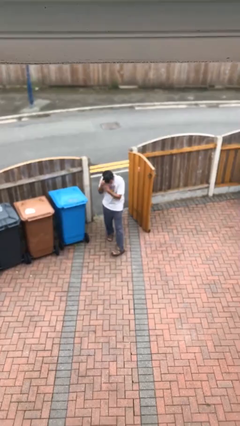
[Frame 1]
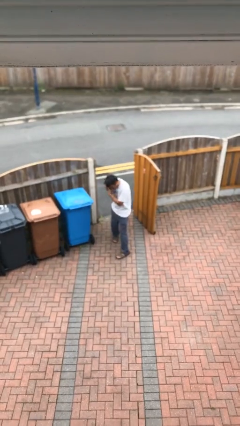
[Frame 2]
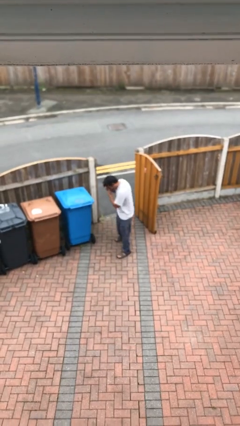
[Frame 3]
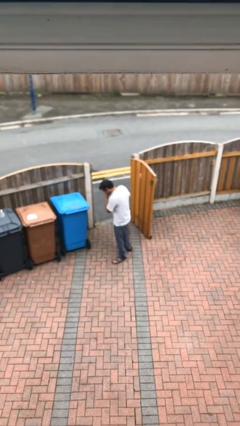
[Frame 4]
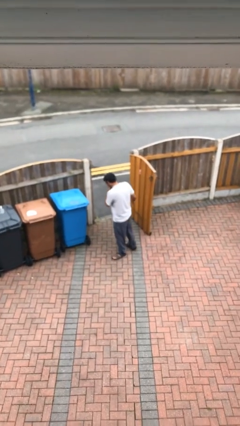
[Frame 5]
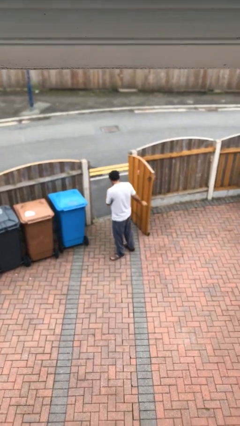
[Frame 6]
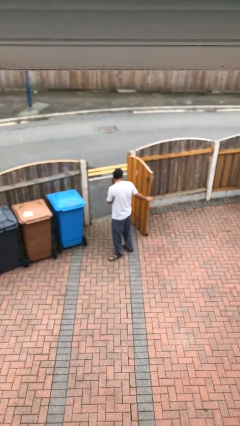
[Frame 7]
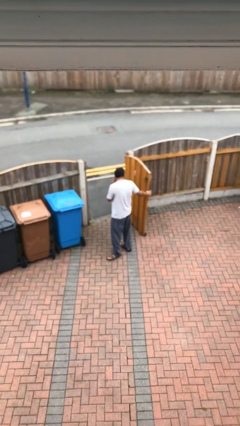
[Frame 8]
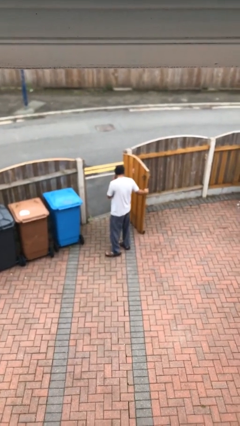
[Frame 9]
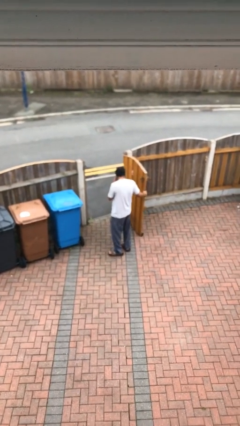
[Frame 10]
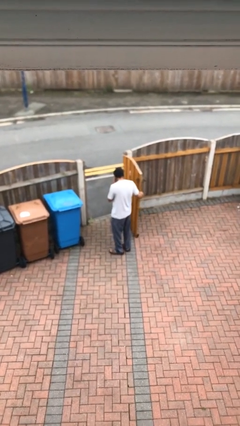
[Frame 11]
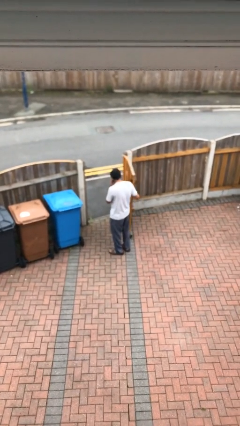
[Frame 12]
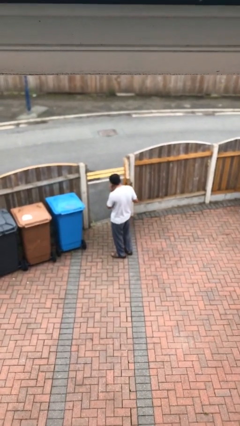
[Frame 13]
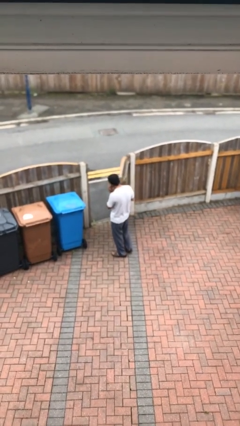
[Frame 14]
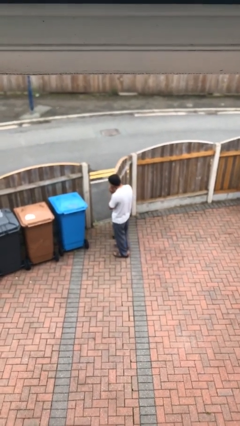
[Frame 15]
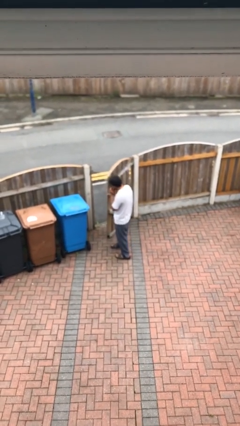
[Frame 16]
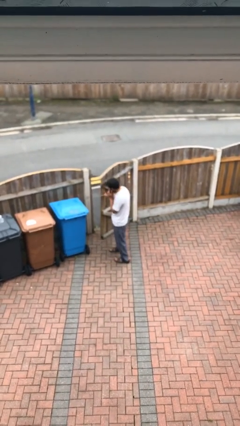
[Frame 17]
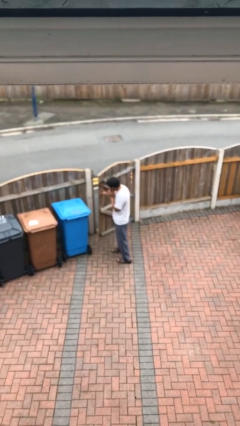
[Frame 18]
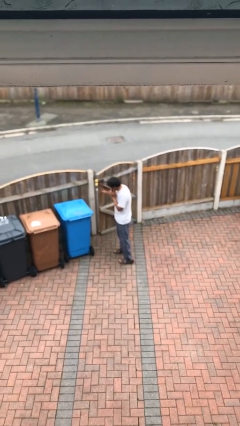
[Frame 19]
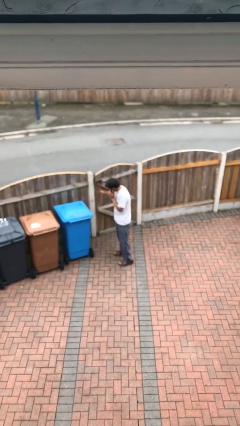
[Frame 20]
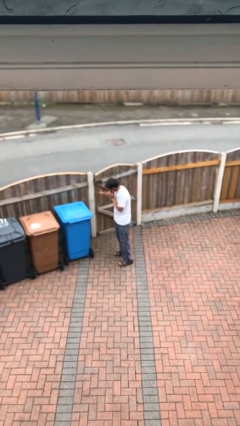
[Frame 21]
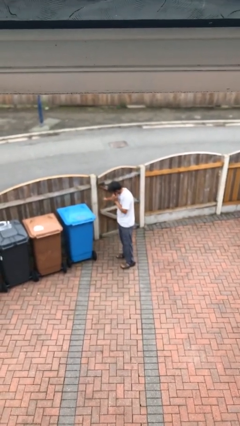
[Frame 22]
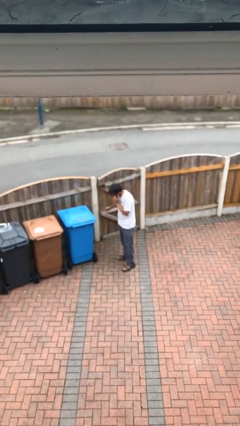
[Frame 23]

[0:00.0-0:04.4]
person closes facility door

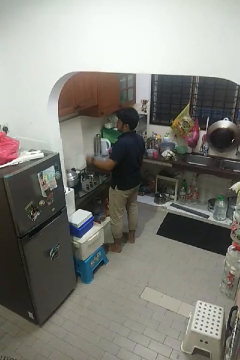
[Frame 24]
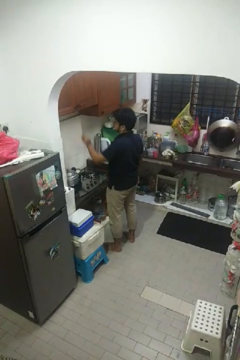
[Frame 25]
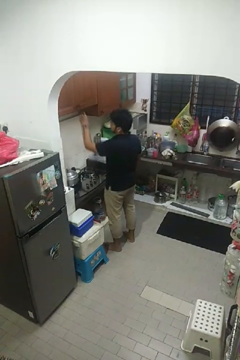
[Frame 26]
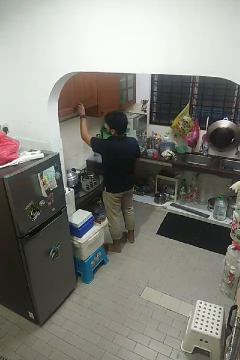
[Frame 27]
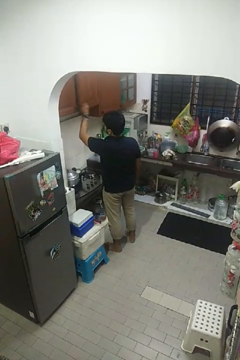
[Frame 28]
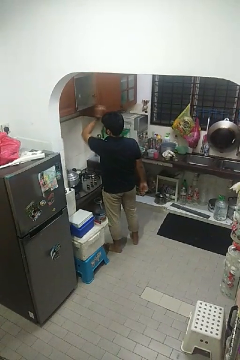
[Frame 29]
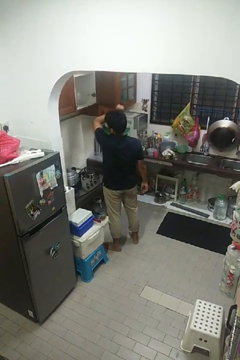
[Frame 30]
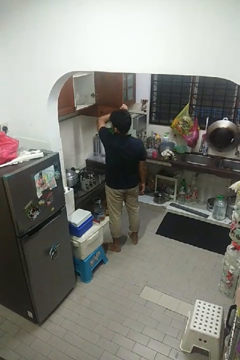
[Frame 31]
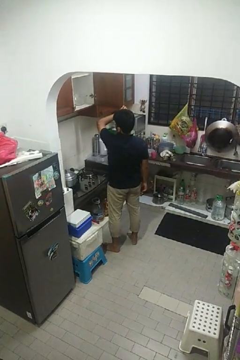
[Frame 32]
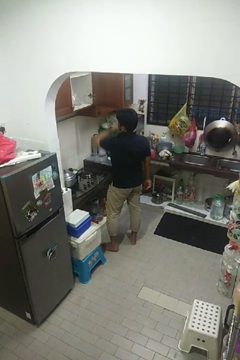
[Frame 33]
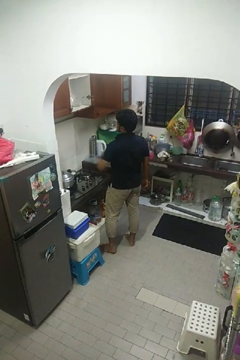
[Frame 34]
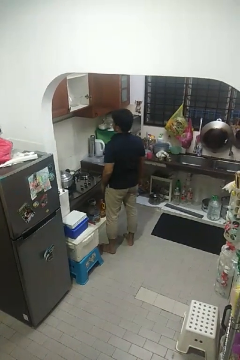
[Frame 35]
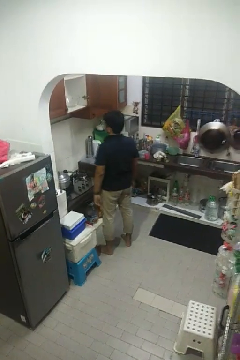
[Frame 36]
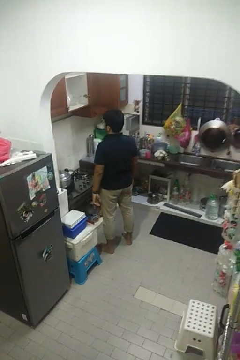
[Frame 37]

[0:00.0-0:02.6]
person opens cabinet

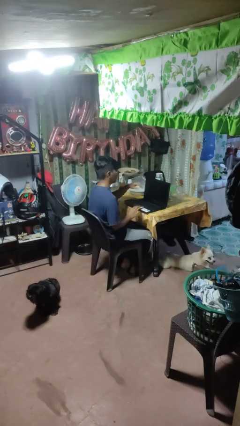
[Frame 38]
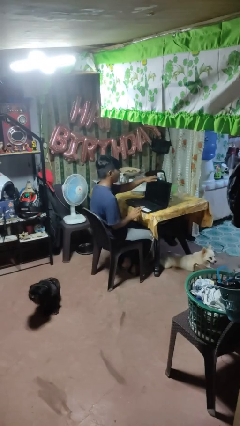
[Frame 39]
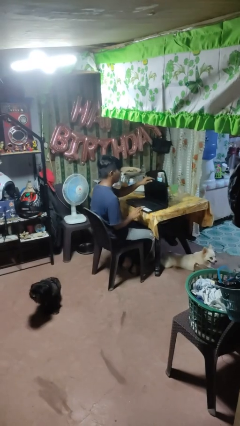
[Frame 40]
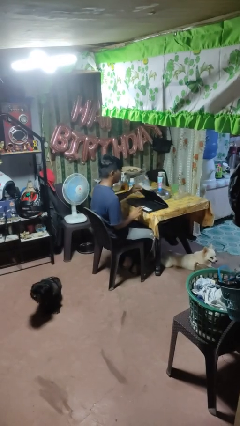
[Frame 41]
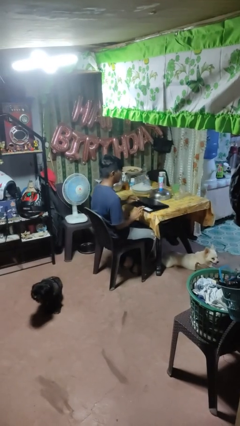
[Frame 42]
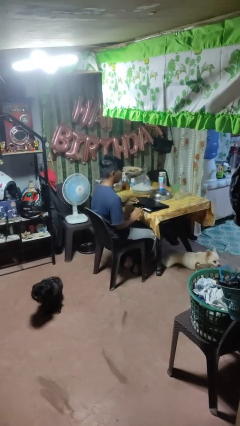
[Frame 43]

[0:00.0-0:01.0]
person closes laptop

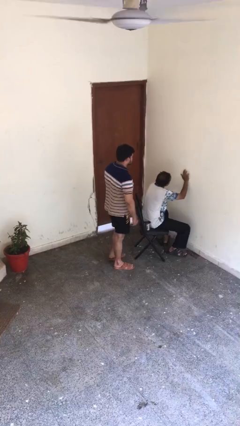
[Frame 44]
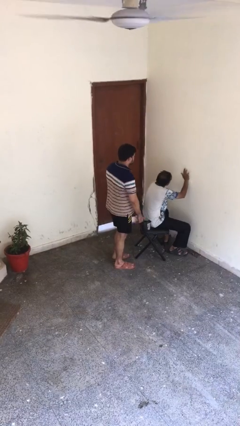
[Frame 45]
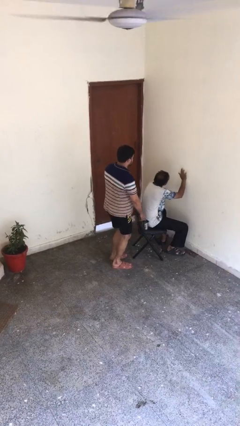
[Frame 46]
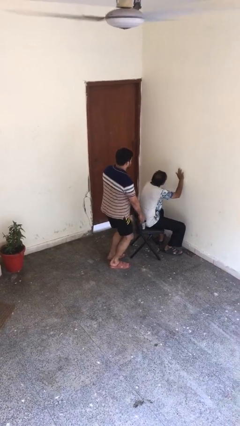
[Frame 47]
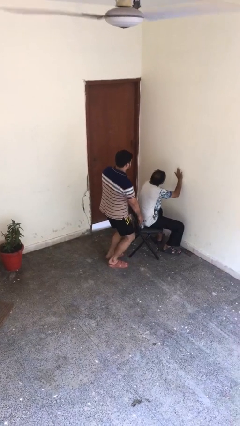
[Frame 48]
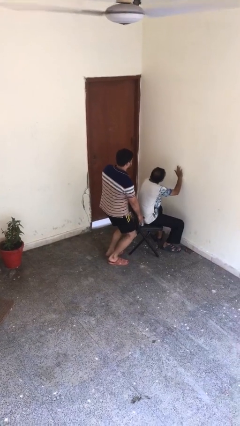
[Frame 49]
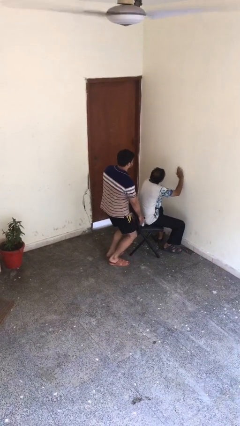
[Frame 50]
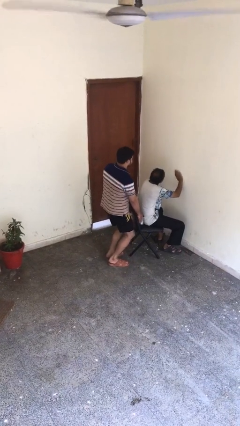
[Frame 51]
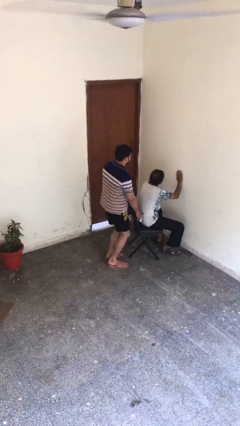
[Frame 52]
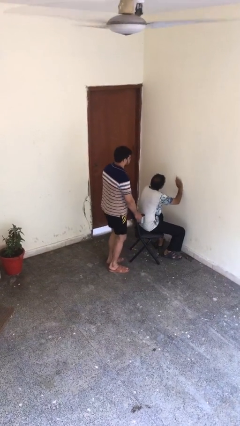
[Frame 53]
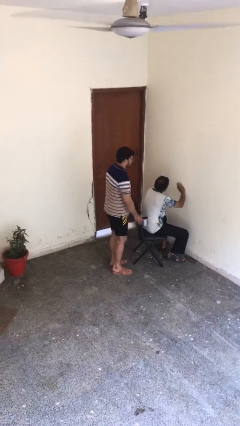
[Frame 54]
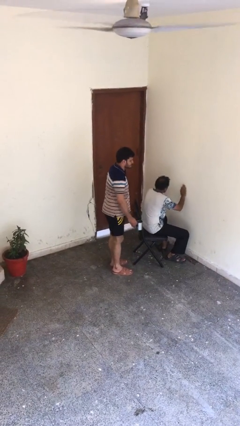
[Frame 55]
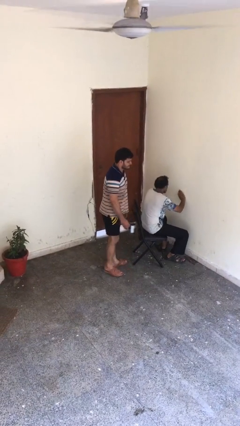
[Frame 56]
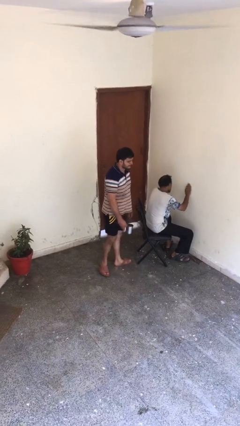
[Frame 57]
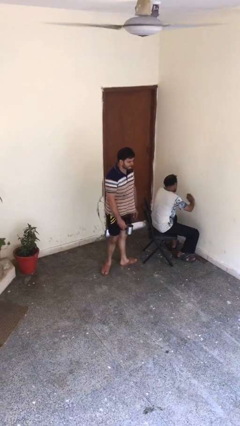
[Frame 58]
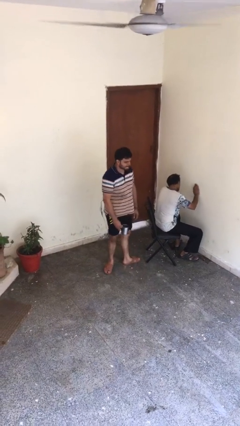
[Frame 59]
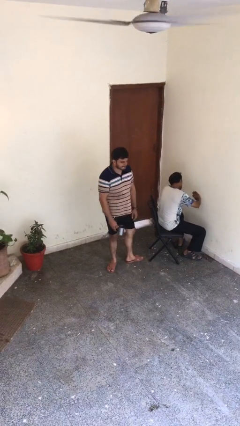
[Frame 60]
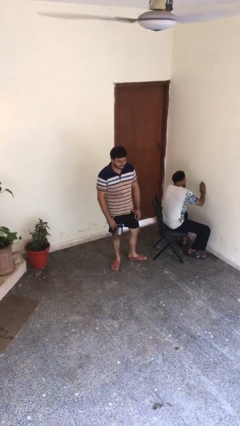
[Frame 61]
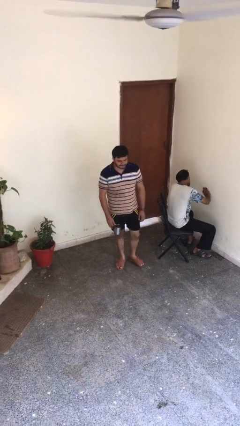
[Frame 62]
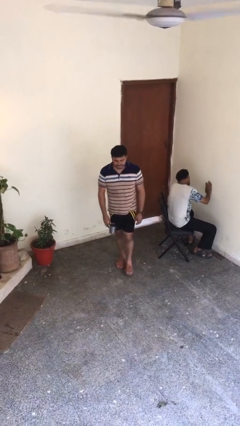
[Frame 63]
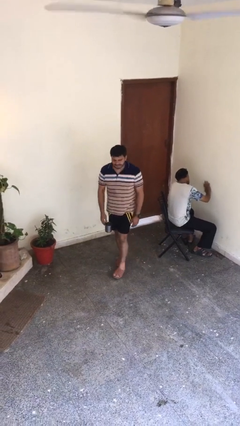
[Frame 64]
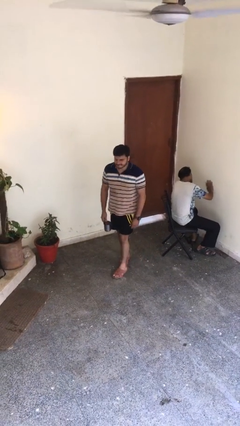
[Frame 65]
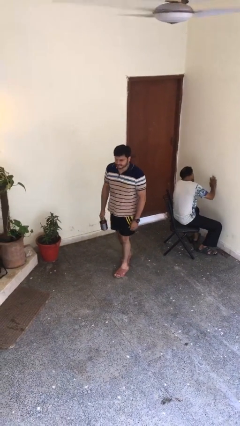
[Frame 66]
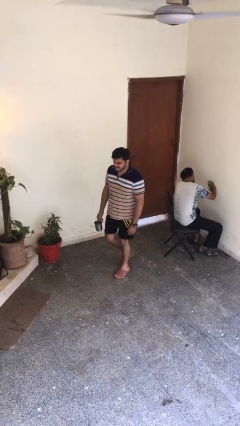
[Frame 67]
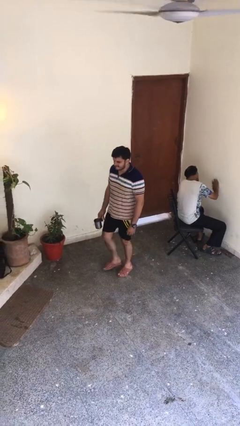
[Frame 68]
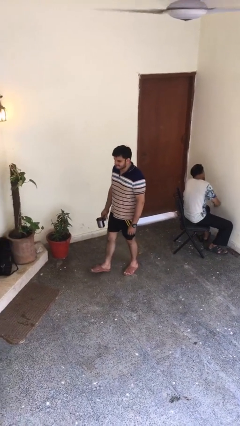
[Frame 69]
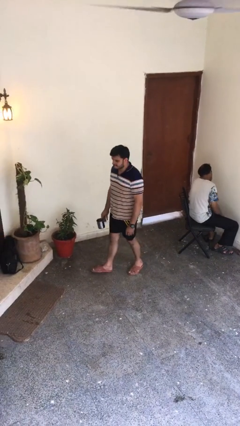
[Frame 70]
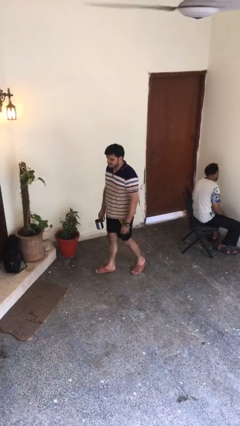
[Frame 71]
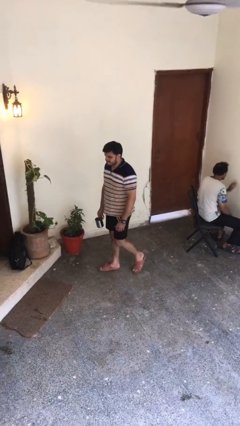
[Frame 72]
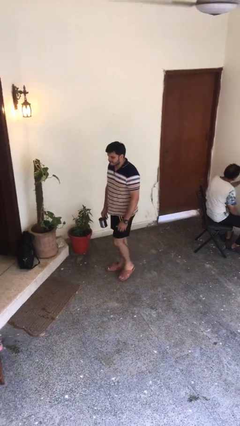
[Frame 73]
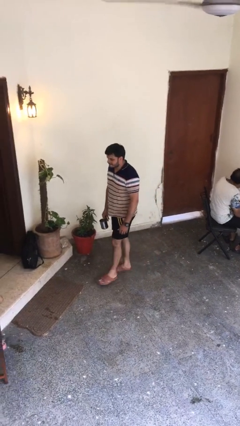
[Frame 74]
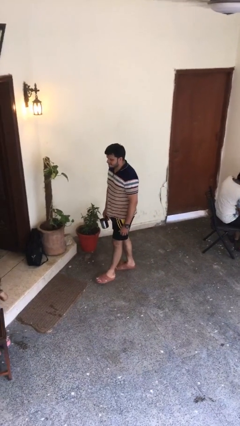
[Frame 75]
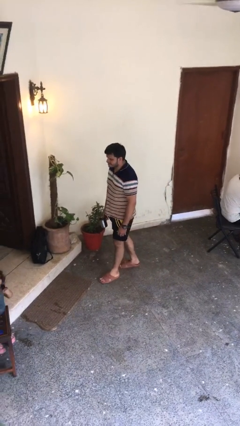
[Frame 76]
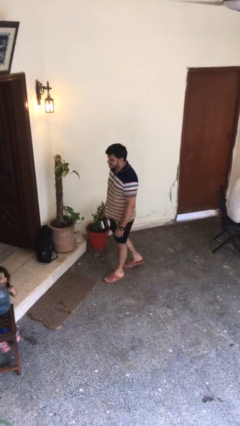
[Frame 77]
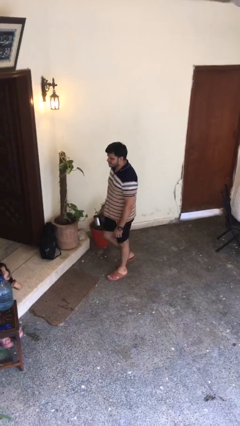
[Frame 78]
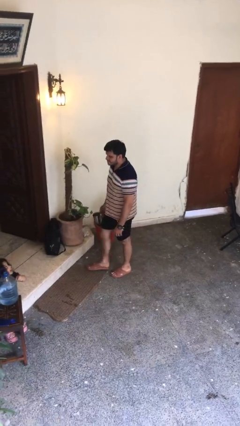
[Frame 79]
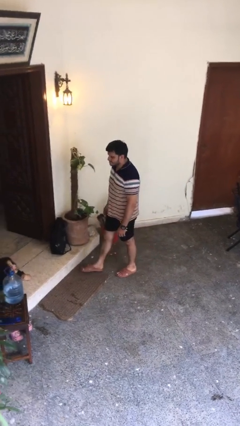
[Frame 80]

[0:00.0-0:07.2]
person steals object from person

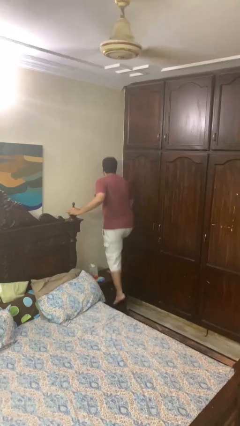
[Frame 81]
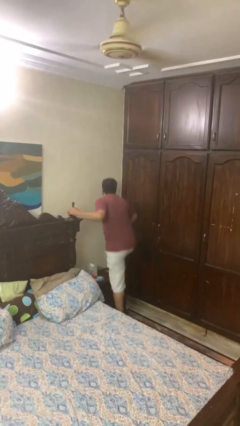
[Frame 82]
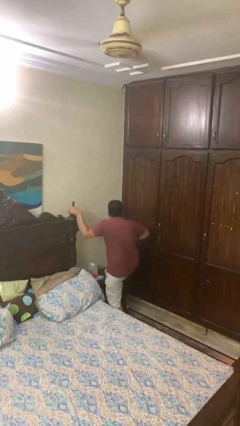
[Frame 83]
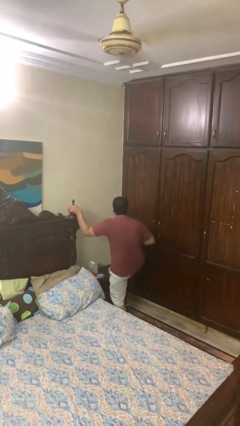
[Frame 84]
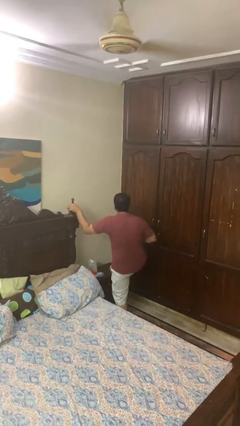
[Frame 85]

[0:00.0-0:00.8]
person climbs off table

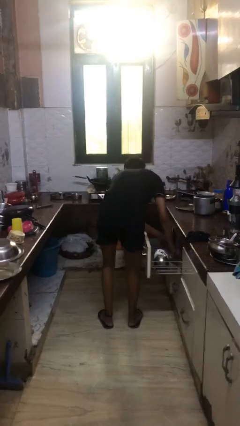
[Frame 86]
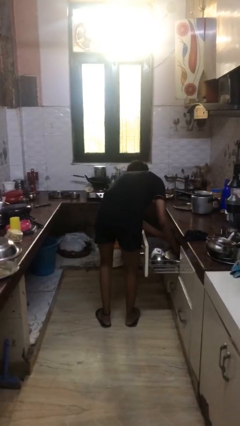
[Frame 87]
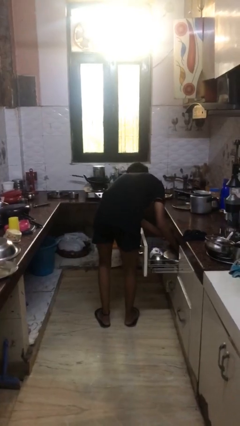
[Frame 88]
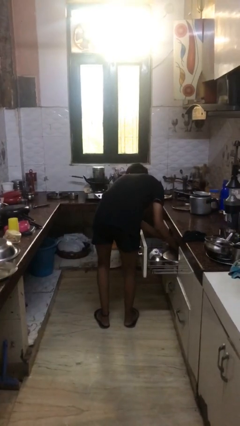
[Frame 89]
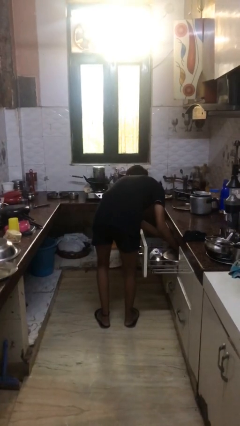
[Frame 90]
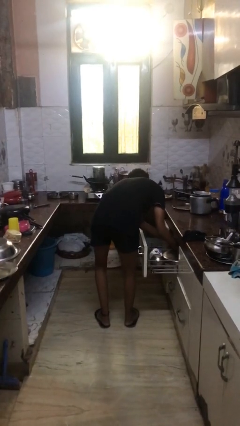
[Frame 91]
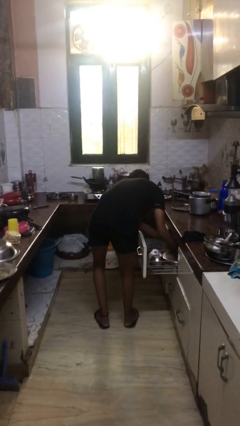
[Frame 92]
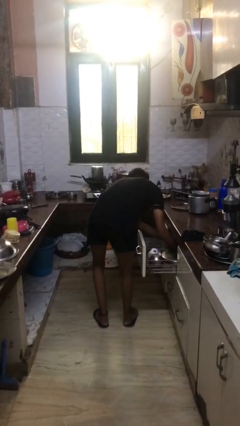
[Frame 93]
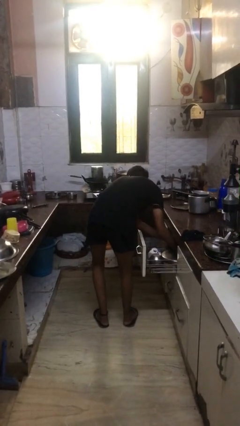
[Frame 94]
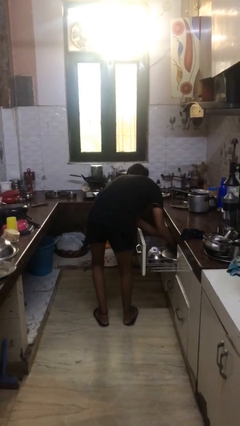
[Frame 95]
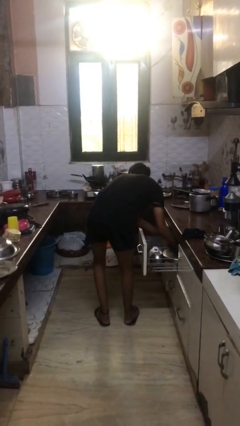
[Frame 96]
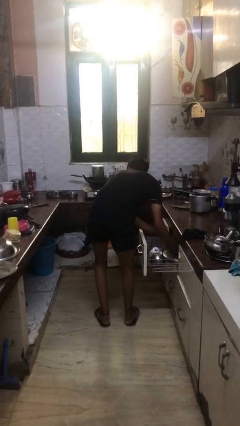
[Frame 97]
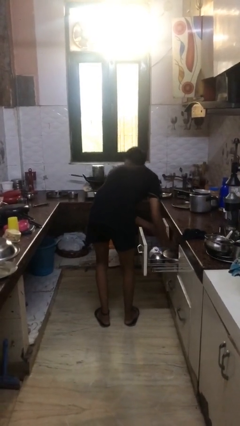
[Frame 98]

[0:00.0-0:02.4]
person searches in kitchen drawer
